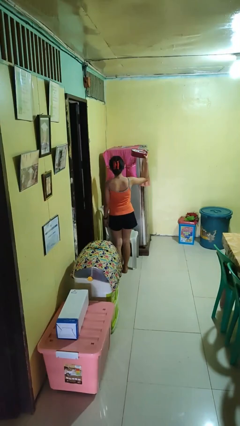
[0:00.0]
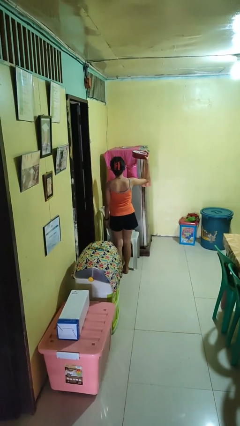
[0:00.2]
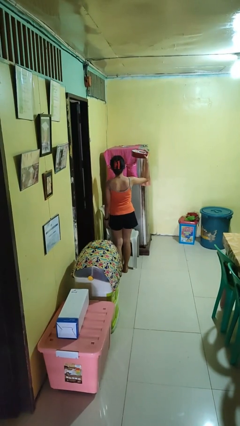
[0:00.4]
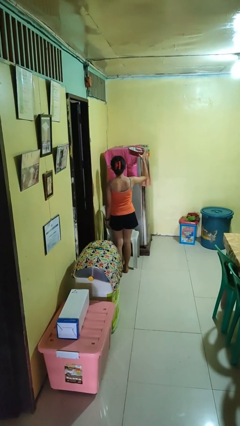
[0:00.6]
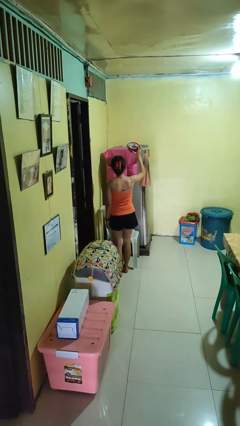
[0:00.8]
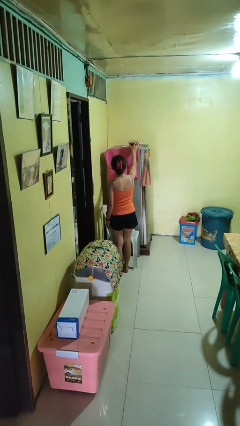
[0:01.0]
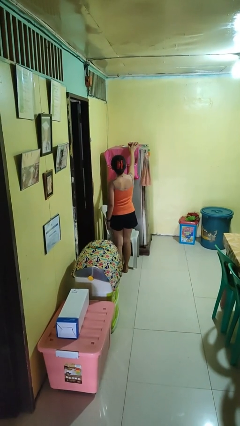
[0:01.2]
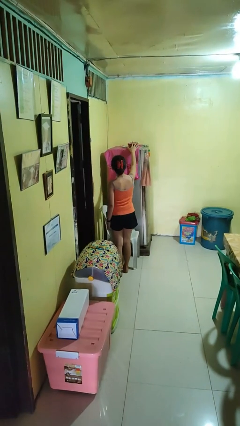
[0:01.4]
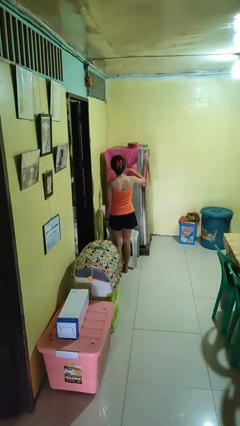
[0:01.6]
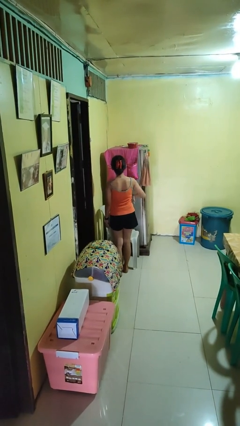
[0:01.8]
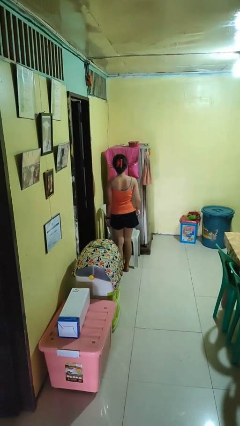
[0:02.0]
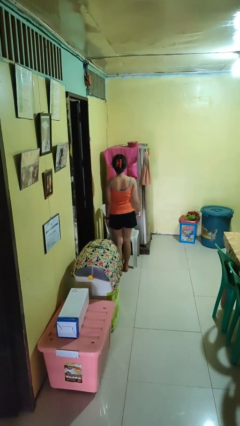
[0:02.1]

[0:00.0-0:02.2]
person puts down object on shelf

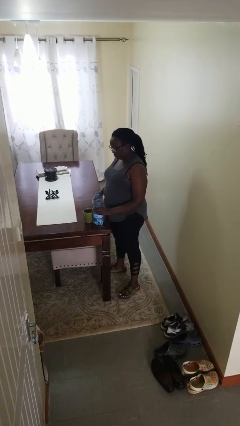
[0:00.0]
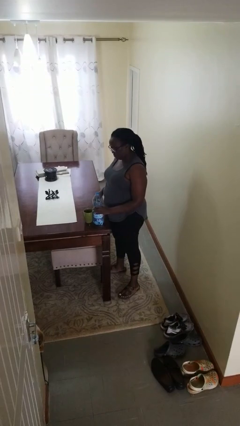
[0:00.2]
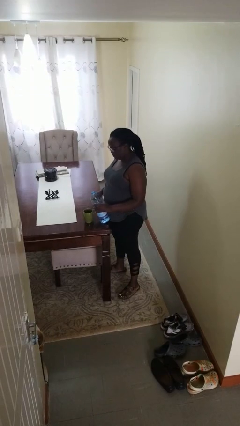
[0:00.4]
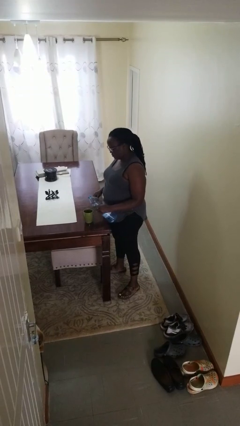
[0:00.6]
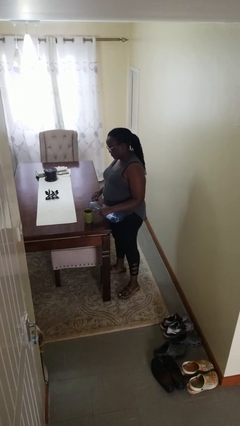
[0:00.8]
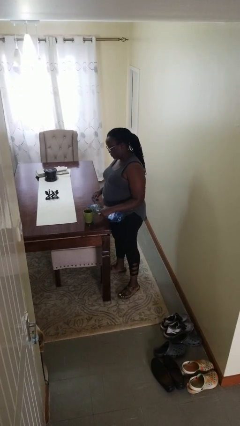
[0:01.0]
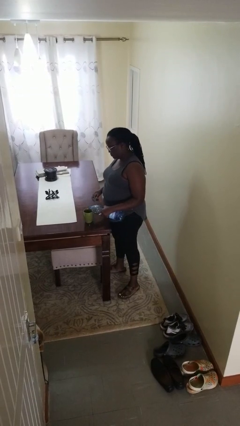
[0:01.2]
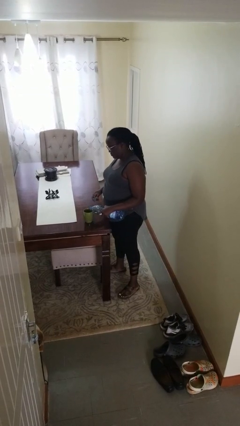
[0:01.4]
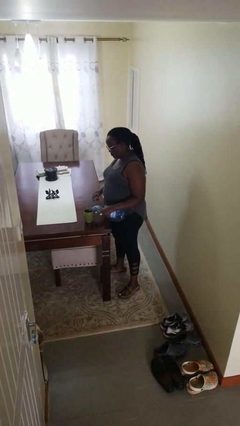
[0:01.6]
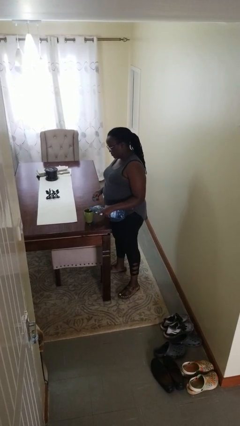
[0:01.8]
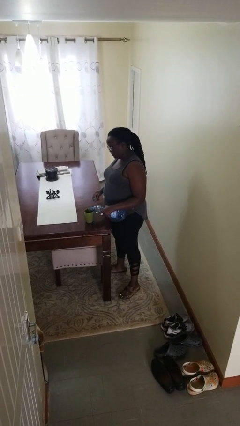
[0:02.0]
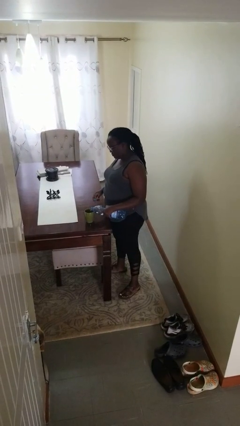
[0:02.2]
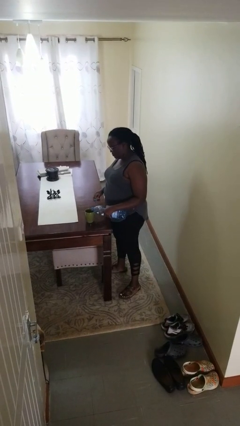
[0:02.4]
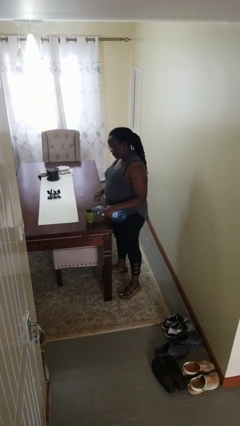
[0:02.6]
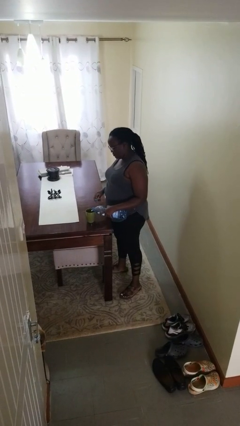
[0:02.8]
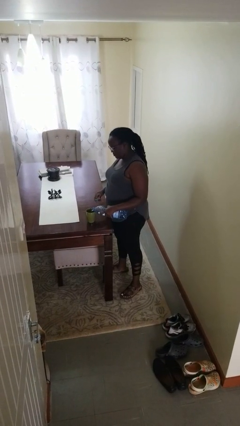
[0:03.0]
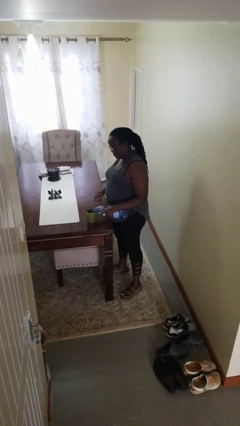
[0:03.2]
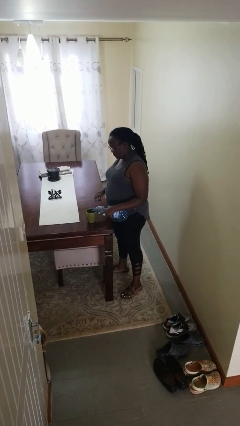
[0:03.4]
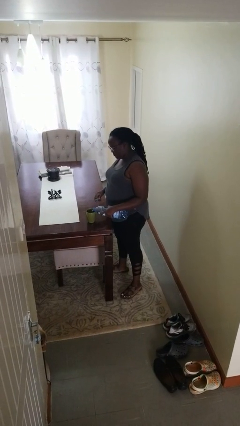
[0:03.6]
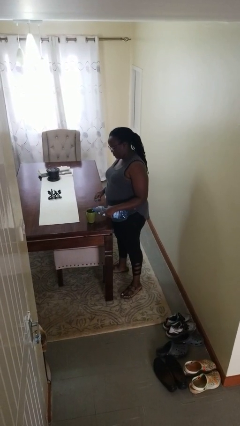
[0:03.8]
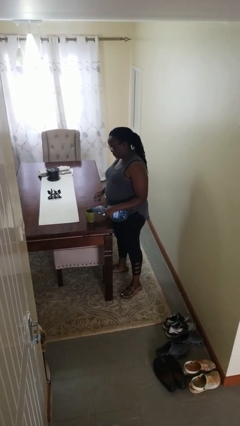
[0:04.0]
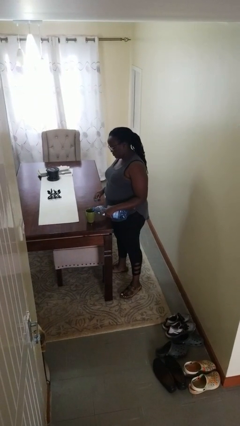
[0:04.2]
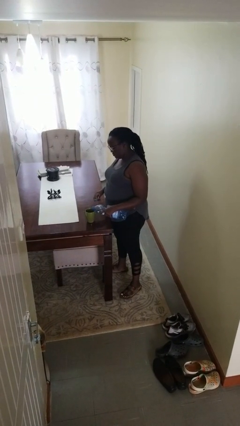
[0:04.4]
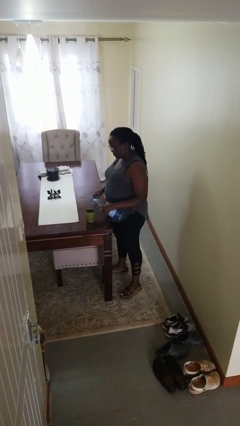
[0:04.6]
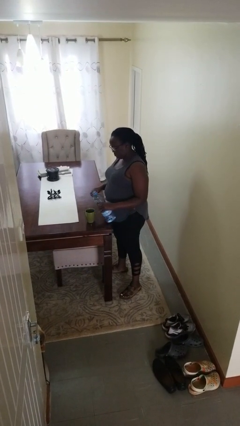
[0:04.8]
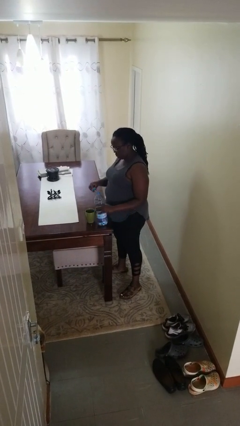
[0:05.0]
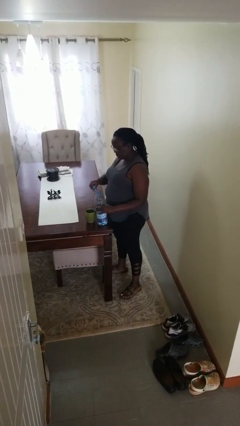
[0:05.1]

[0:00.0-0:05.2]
person pours liquid into cup

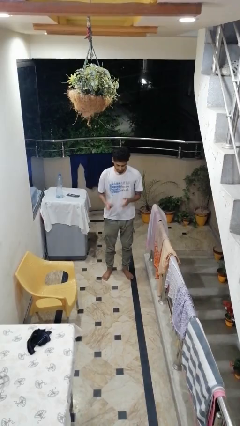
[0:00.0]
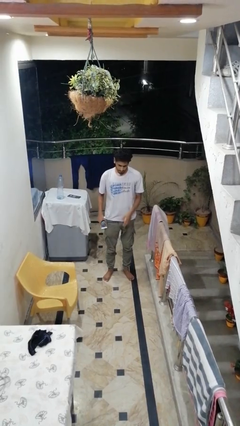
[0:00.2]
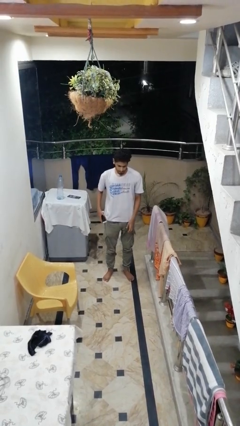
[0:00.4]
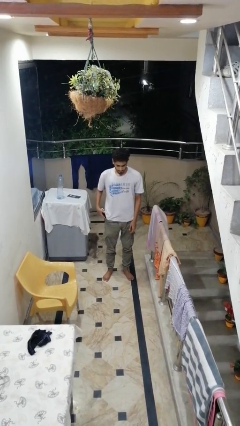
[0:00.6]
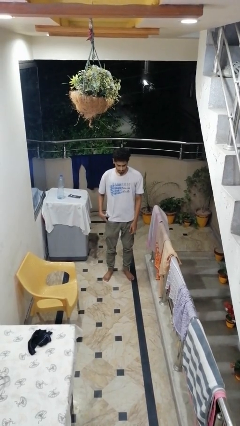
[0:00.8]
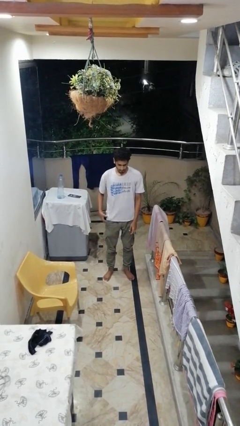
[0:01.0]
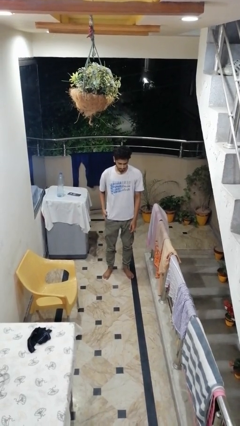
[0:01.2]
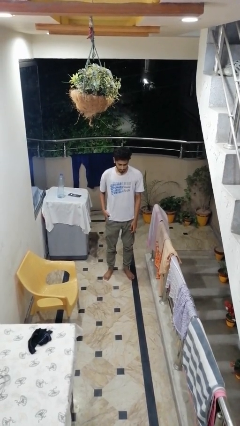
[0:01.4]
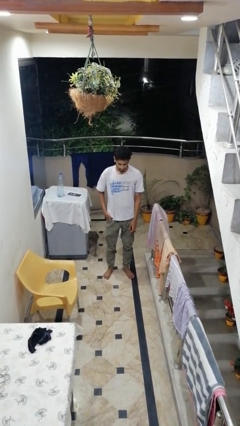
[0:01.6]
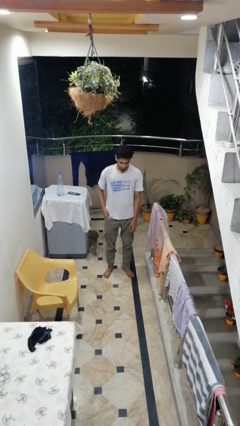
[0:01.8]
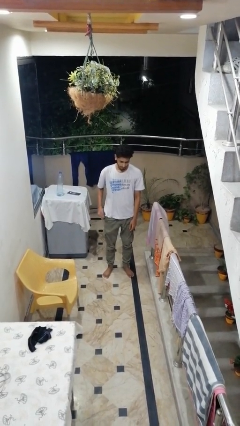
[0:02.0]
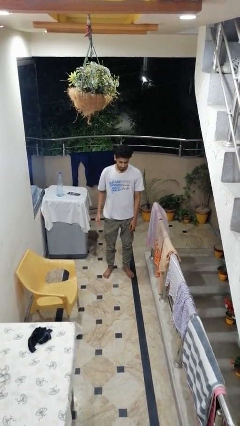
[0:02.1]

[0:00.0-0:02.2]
person puts phone into pocket

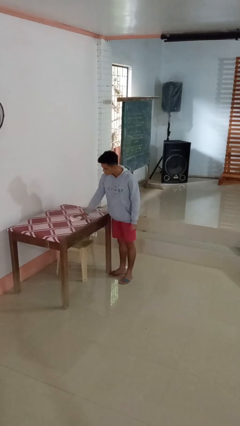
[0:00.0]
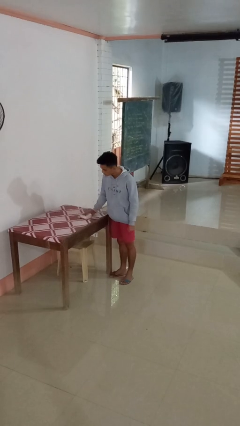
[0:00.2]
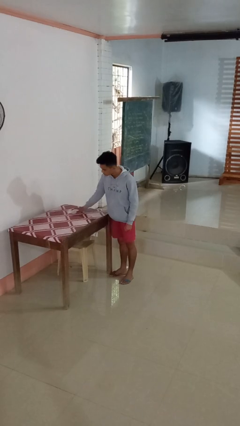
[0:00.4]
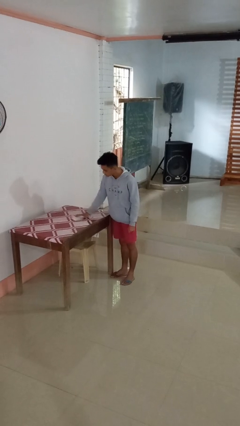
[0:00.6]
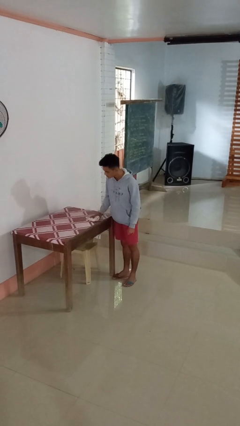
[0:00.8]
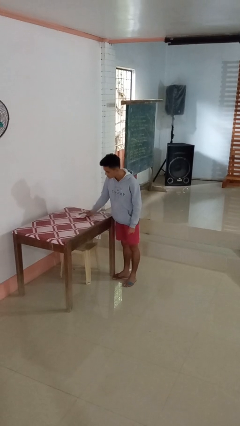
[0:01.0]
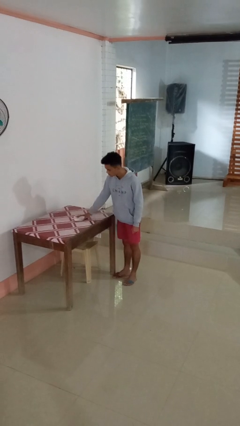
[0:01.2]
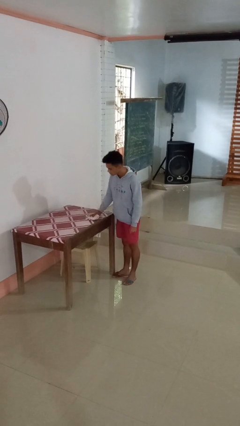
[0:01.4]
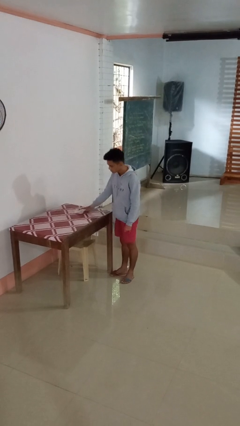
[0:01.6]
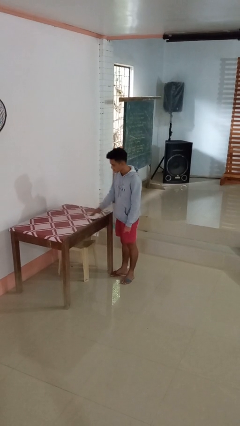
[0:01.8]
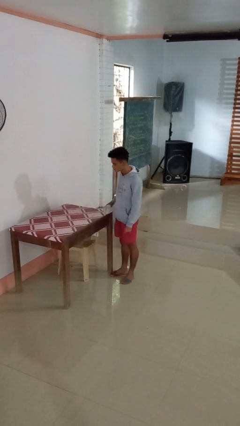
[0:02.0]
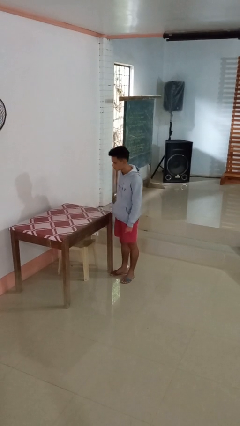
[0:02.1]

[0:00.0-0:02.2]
person cleans table with rag

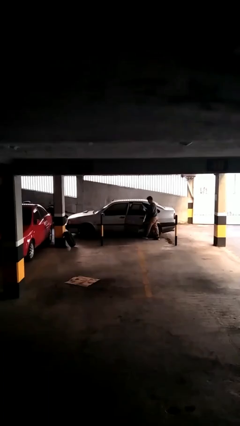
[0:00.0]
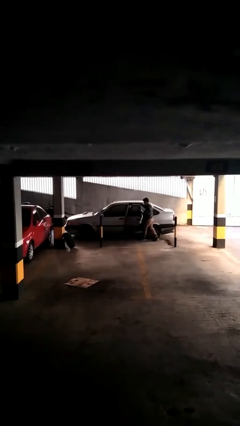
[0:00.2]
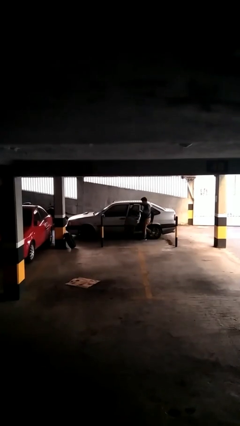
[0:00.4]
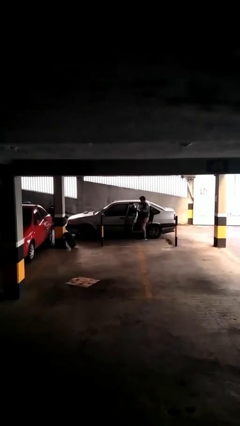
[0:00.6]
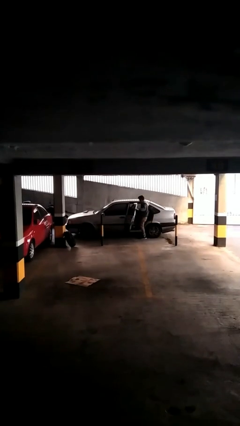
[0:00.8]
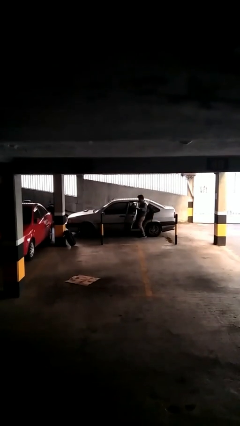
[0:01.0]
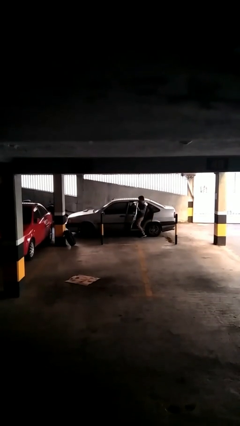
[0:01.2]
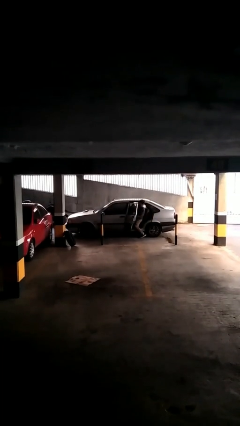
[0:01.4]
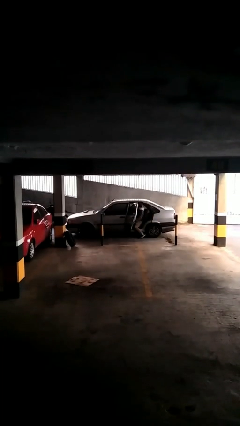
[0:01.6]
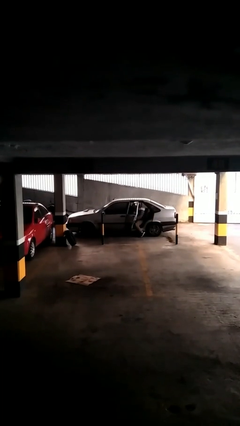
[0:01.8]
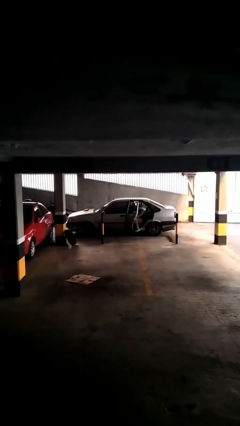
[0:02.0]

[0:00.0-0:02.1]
car picks up person

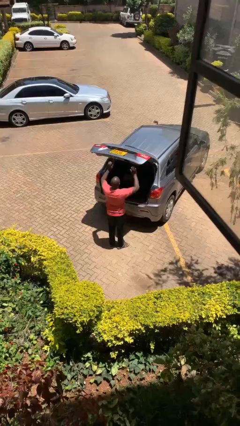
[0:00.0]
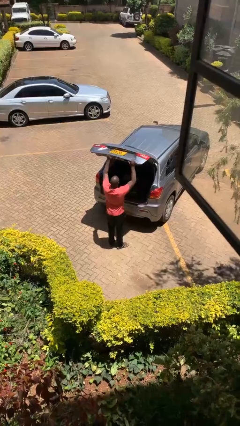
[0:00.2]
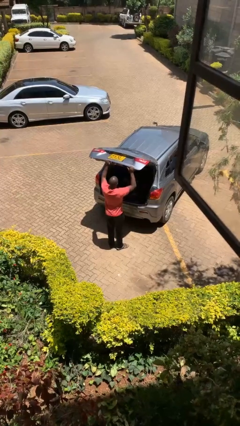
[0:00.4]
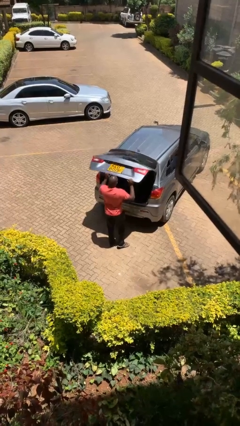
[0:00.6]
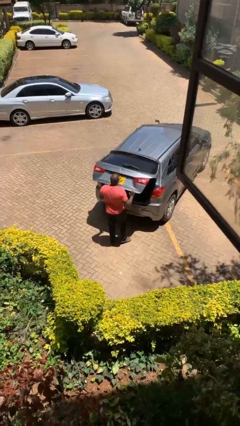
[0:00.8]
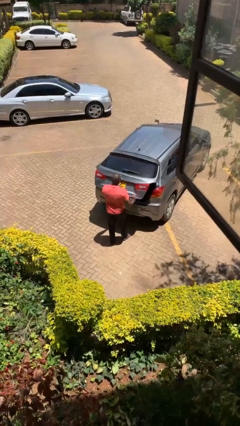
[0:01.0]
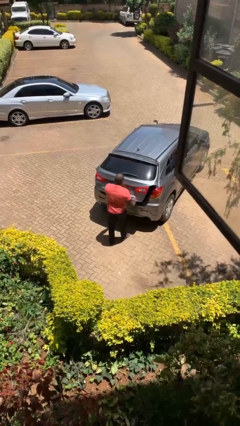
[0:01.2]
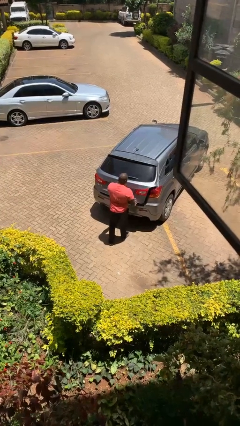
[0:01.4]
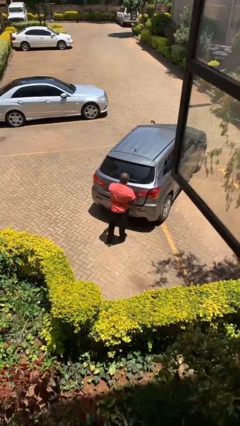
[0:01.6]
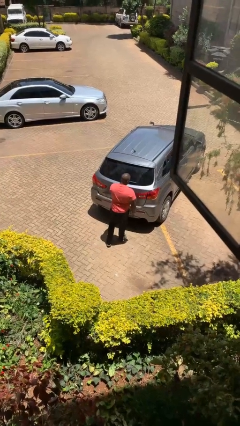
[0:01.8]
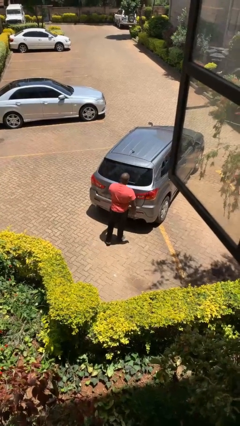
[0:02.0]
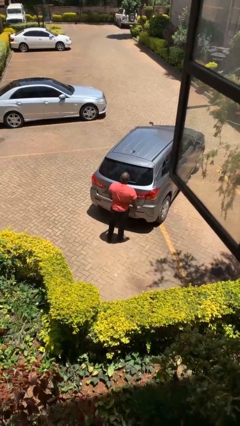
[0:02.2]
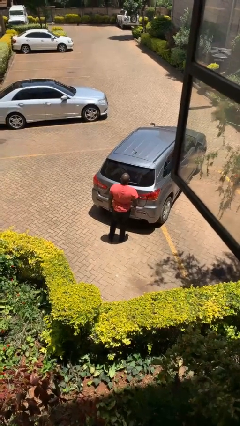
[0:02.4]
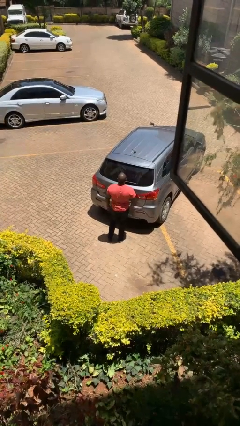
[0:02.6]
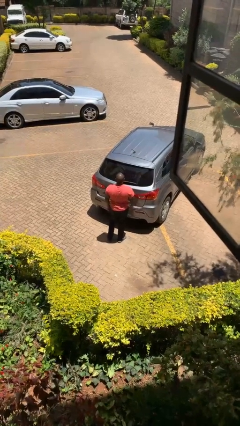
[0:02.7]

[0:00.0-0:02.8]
person closes car trunk

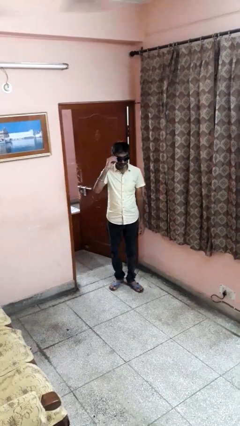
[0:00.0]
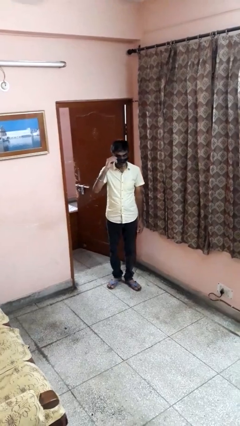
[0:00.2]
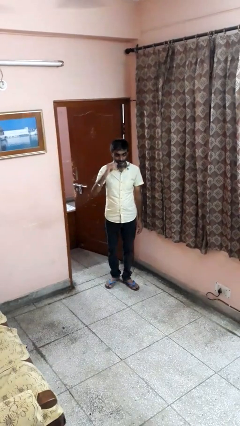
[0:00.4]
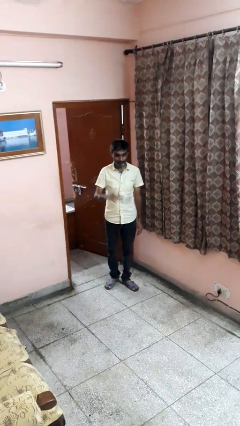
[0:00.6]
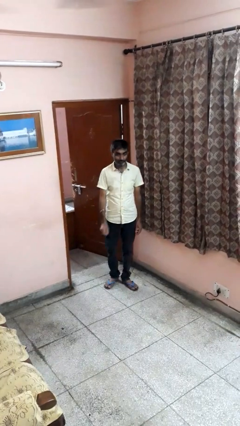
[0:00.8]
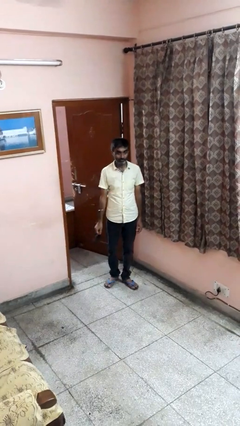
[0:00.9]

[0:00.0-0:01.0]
person takes off sunglasses
